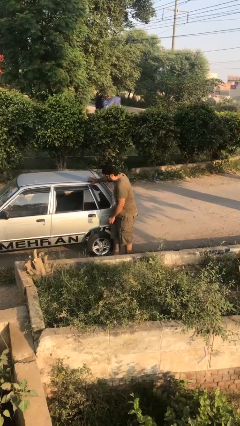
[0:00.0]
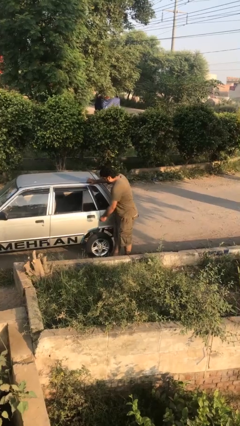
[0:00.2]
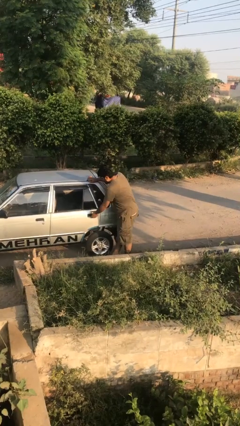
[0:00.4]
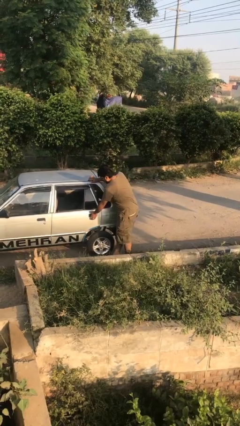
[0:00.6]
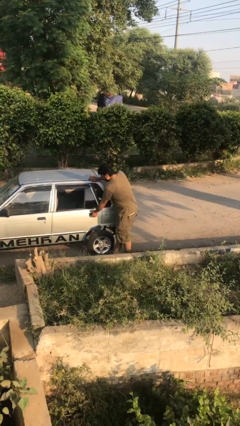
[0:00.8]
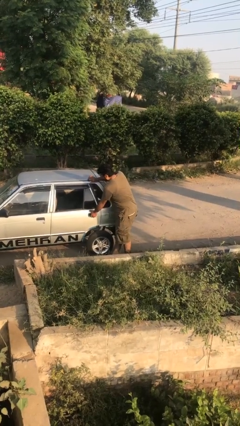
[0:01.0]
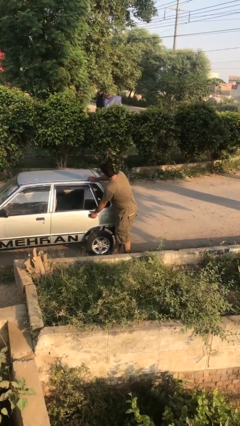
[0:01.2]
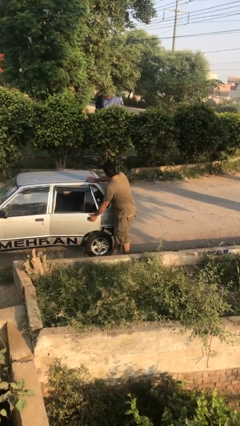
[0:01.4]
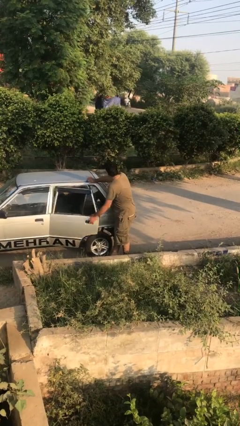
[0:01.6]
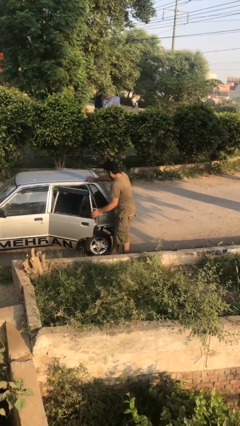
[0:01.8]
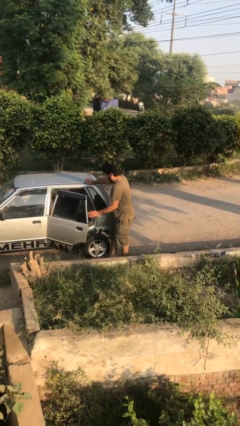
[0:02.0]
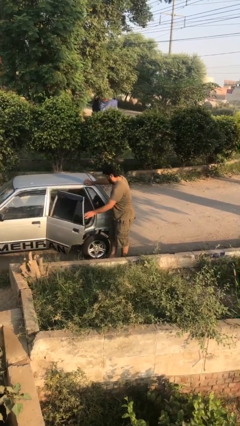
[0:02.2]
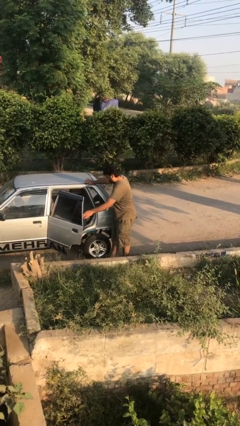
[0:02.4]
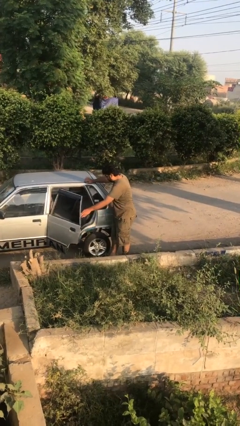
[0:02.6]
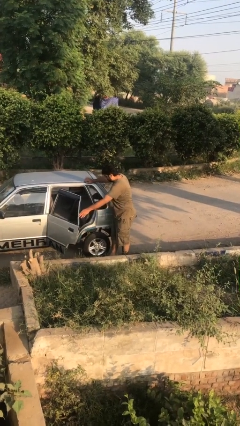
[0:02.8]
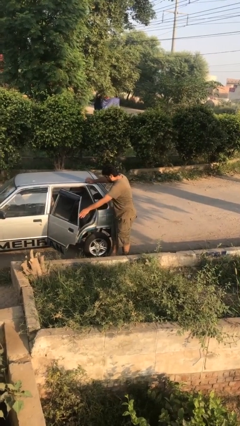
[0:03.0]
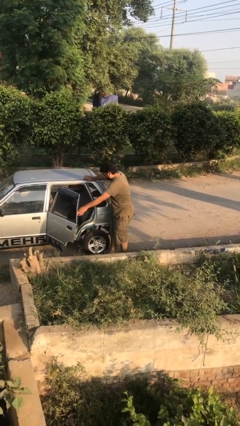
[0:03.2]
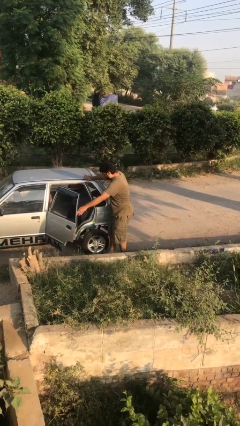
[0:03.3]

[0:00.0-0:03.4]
person opens car door

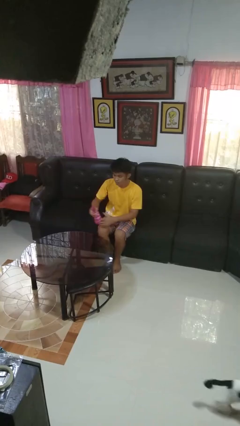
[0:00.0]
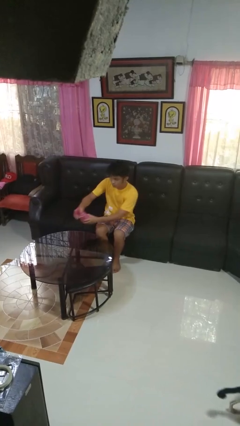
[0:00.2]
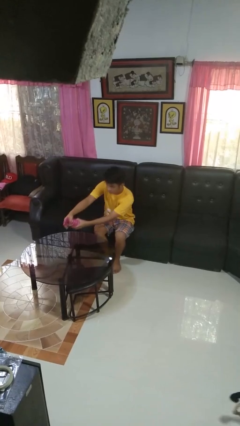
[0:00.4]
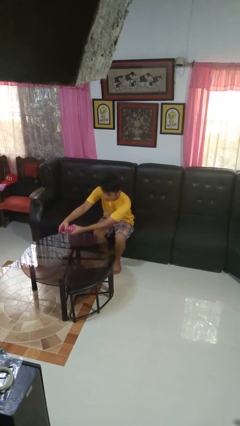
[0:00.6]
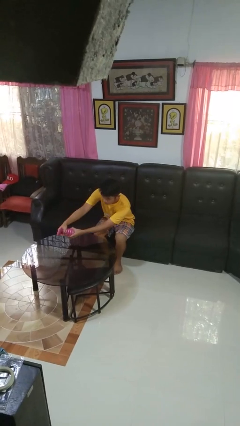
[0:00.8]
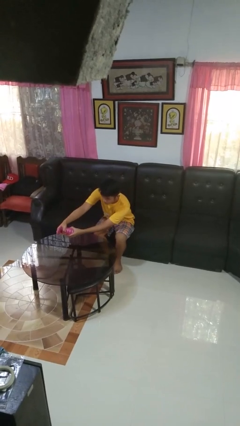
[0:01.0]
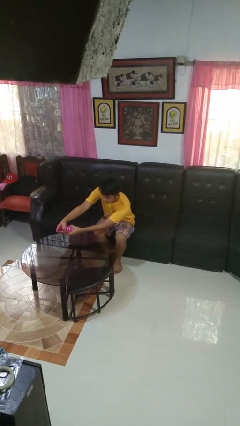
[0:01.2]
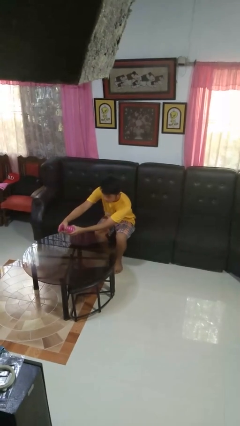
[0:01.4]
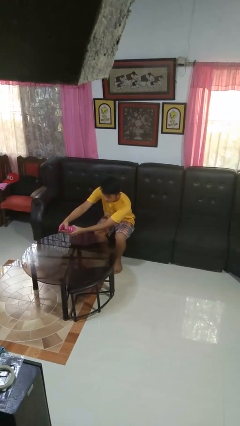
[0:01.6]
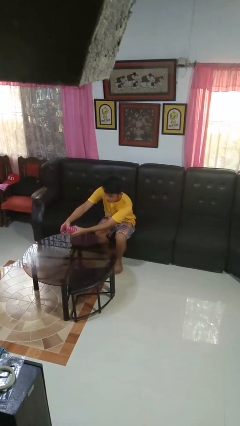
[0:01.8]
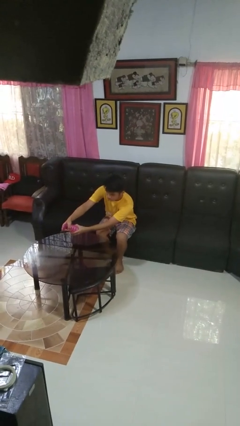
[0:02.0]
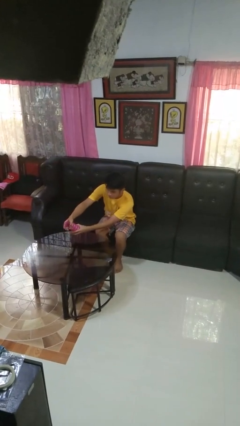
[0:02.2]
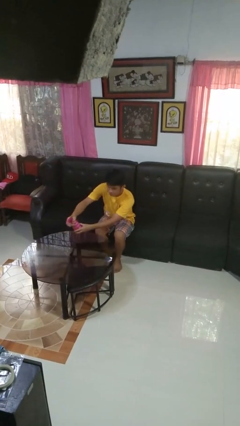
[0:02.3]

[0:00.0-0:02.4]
person sprays from bottle

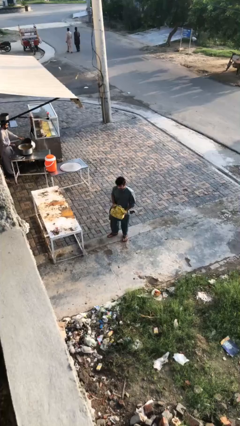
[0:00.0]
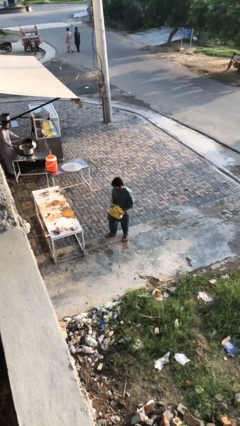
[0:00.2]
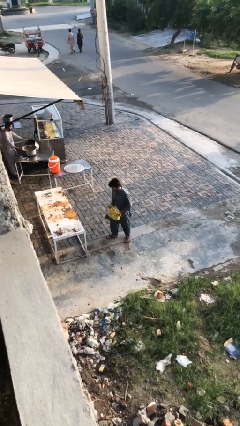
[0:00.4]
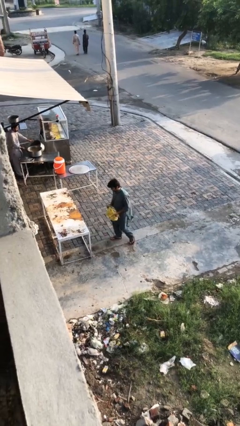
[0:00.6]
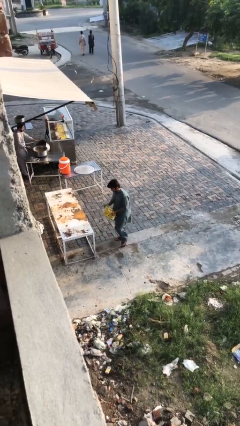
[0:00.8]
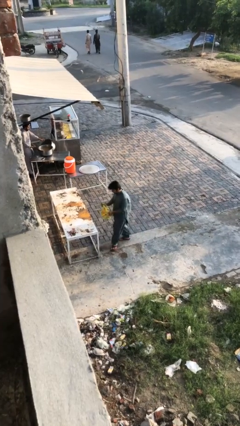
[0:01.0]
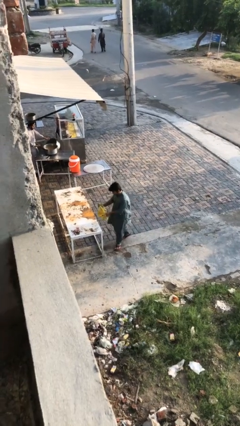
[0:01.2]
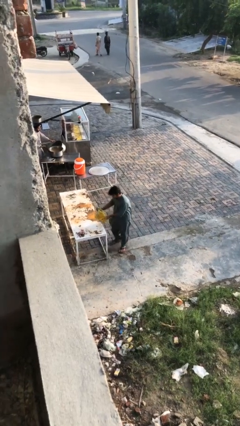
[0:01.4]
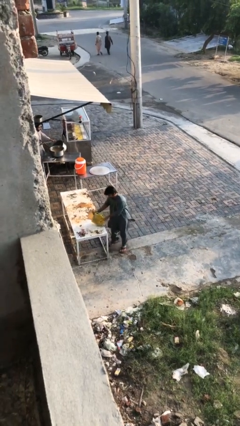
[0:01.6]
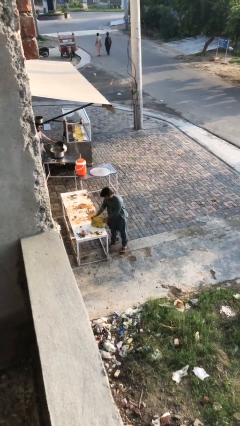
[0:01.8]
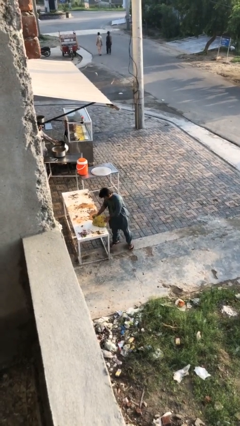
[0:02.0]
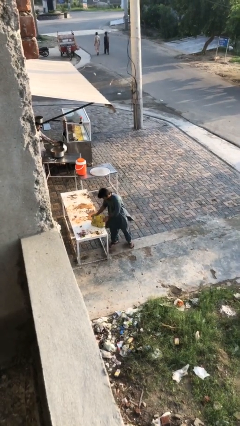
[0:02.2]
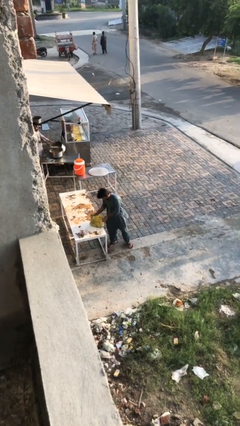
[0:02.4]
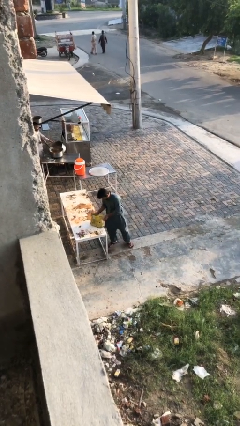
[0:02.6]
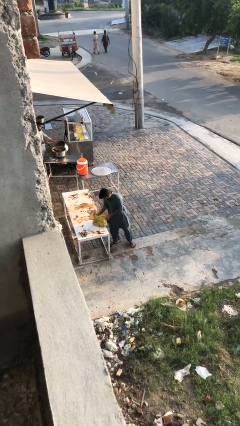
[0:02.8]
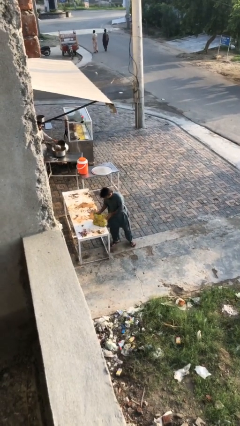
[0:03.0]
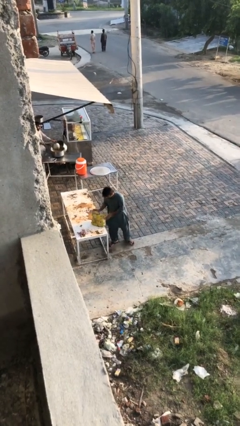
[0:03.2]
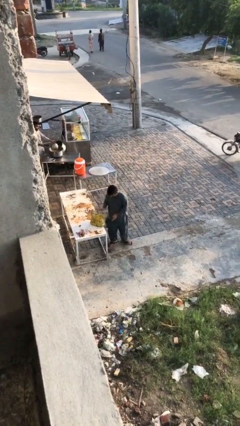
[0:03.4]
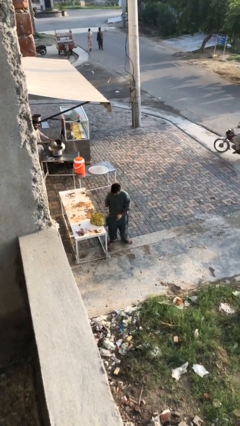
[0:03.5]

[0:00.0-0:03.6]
person puts down object on table

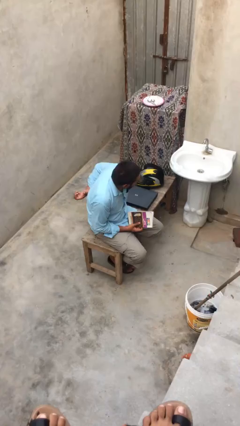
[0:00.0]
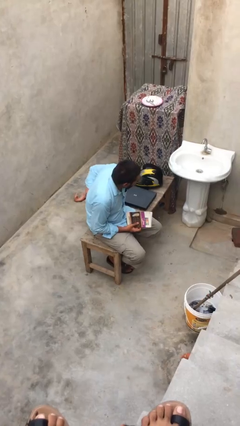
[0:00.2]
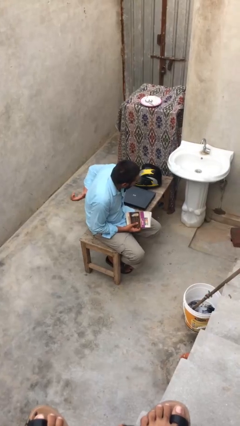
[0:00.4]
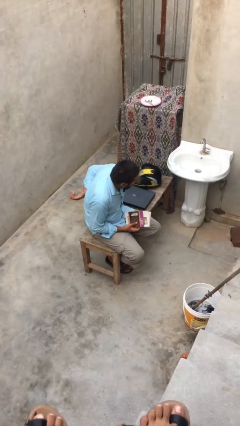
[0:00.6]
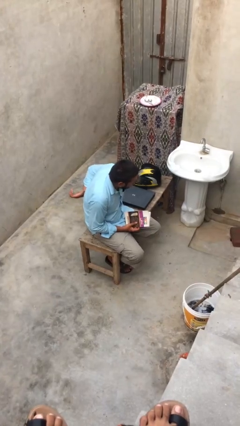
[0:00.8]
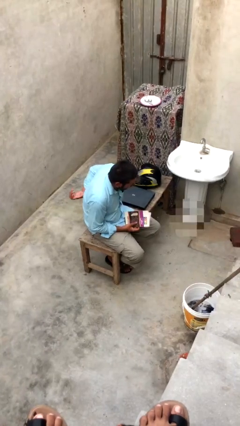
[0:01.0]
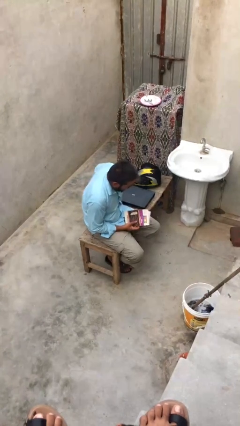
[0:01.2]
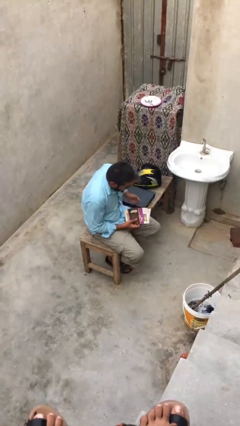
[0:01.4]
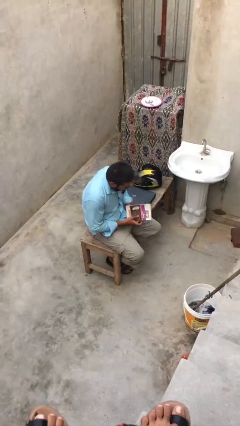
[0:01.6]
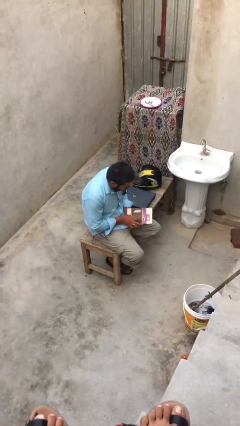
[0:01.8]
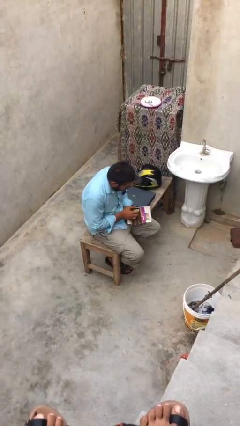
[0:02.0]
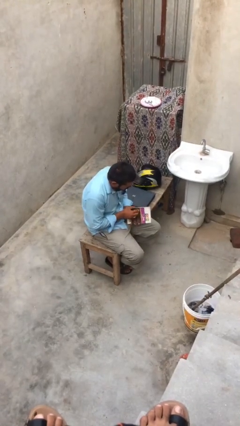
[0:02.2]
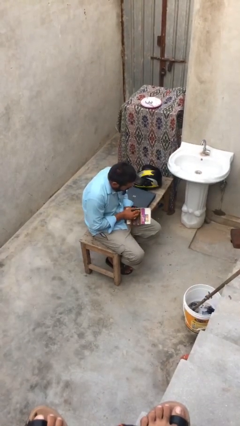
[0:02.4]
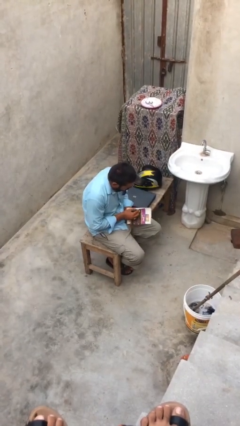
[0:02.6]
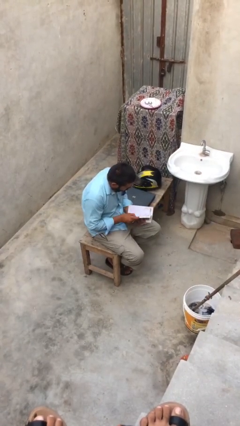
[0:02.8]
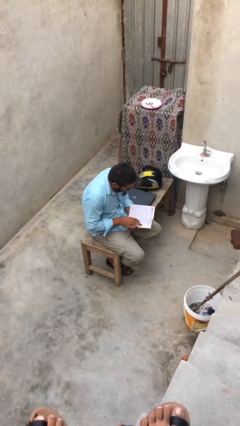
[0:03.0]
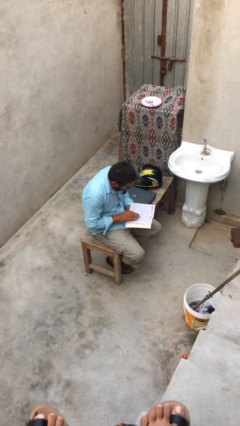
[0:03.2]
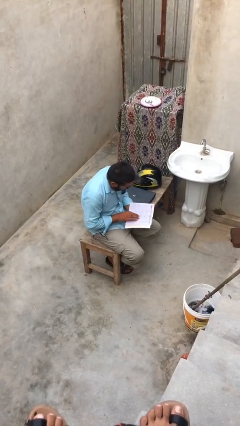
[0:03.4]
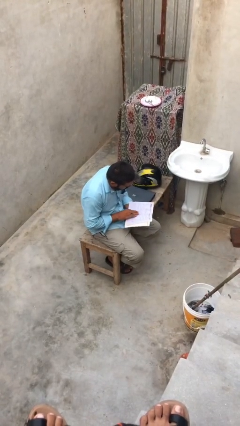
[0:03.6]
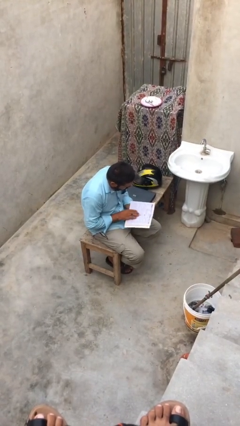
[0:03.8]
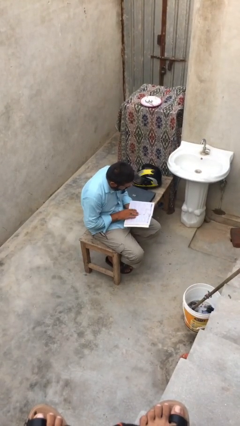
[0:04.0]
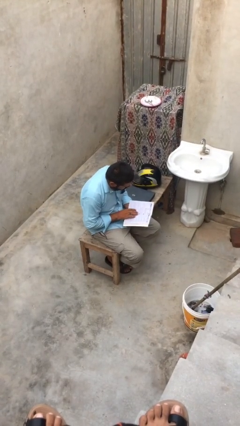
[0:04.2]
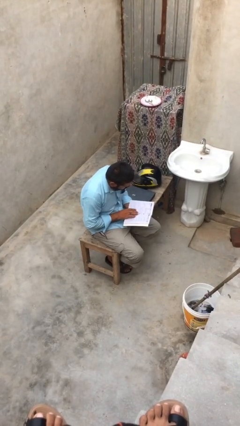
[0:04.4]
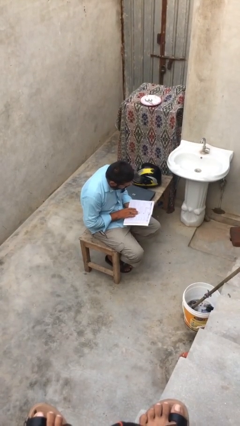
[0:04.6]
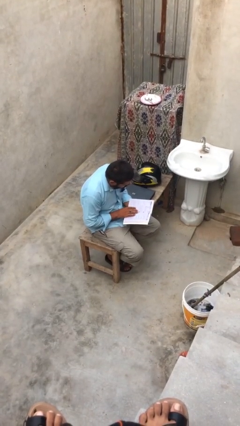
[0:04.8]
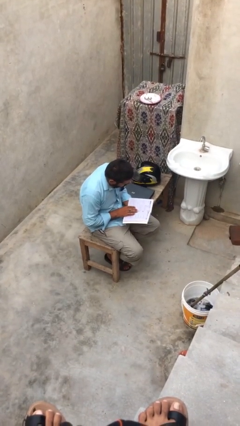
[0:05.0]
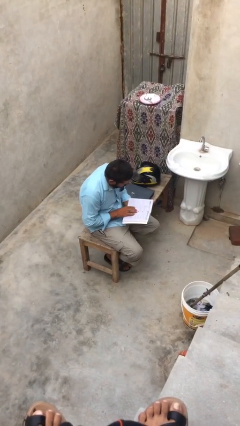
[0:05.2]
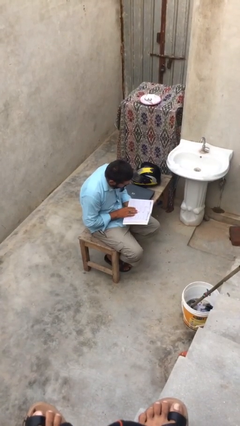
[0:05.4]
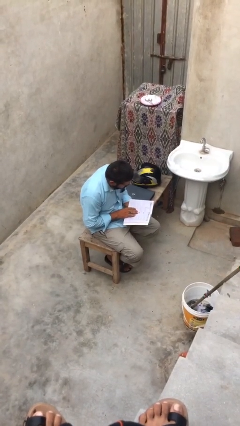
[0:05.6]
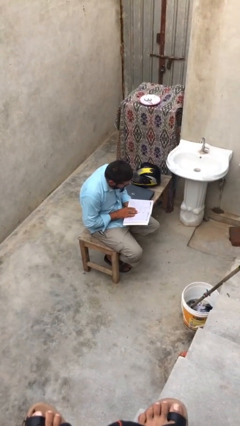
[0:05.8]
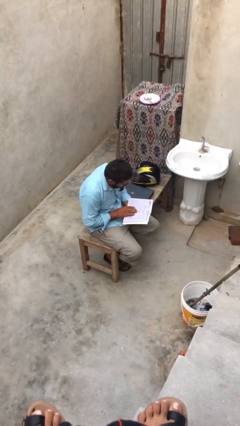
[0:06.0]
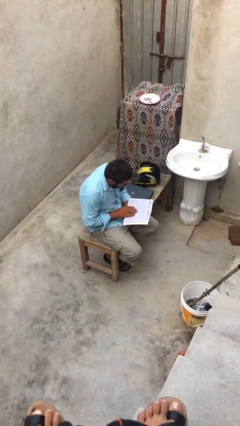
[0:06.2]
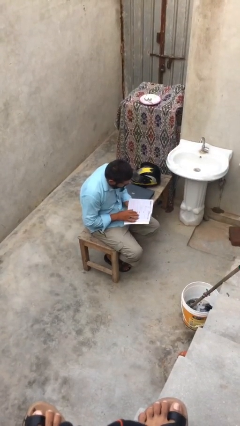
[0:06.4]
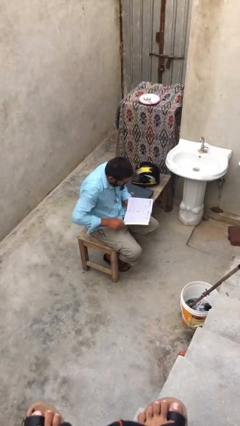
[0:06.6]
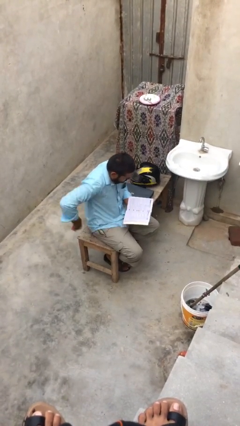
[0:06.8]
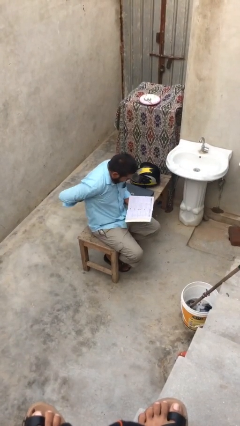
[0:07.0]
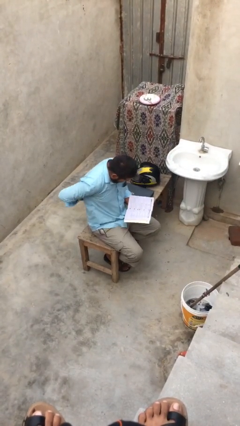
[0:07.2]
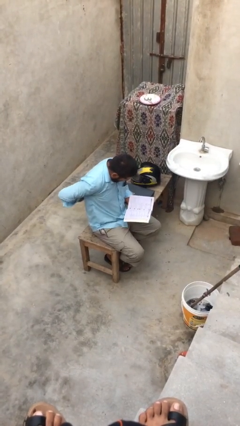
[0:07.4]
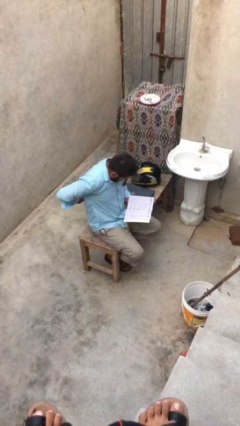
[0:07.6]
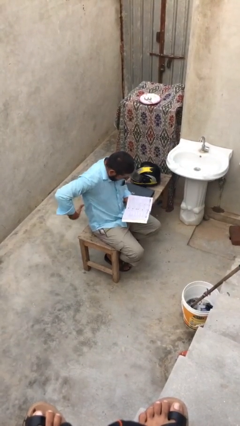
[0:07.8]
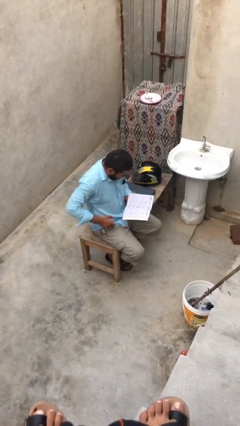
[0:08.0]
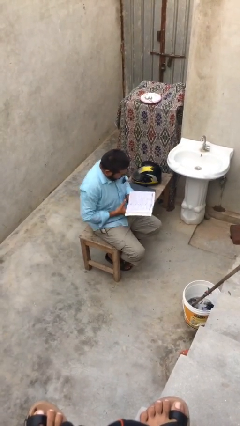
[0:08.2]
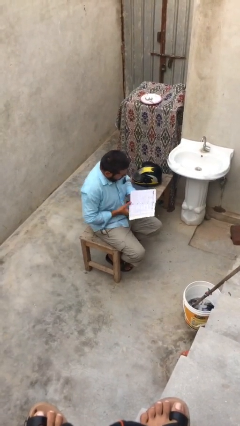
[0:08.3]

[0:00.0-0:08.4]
person reads document
